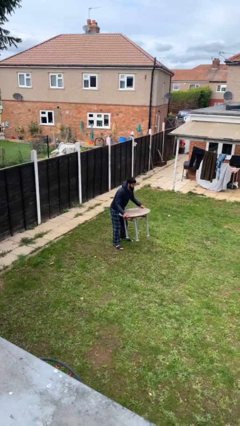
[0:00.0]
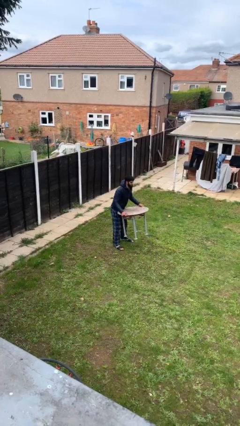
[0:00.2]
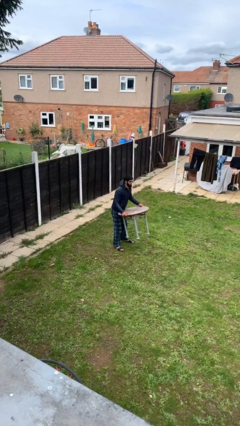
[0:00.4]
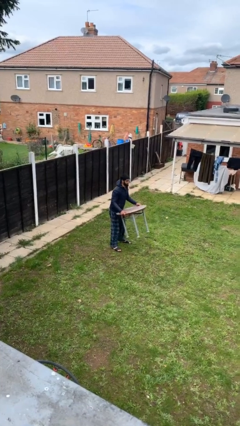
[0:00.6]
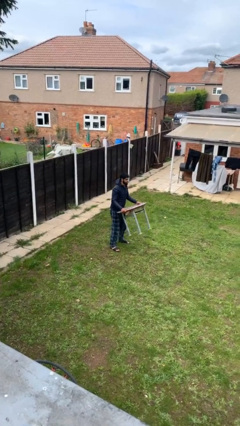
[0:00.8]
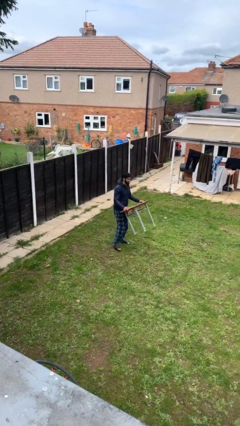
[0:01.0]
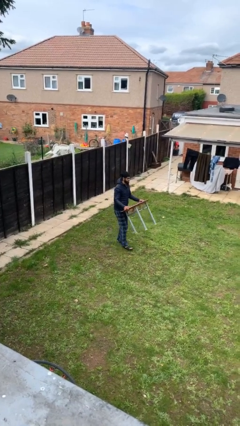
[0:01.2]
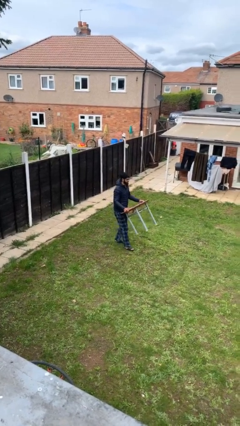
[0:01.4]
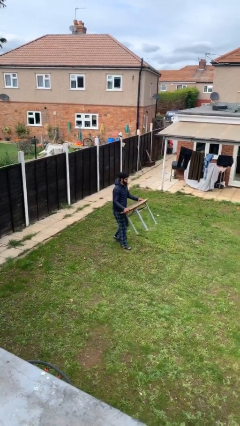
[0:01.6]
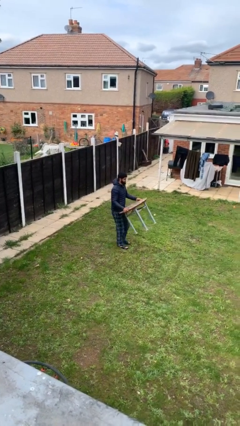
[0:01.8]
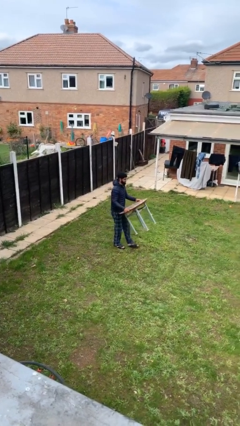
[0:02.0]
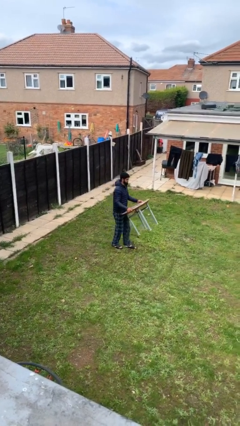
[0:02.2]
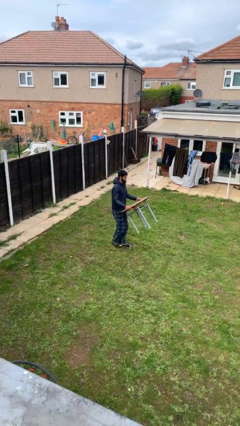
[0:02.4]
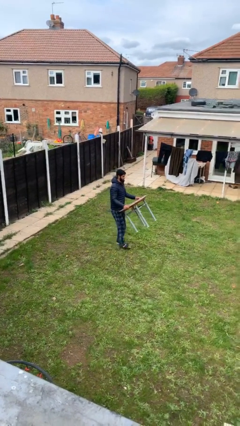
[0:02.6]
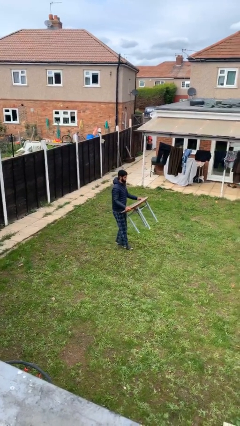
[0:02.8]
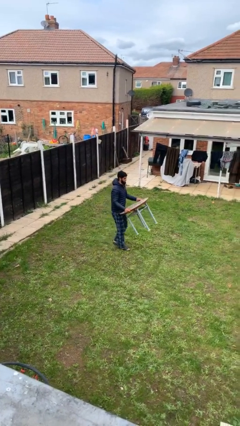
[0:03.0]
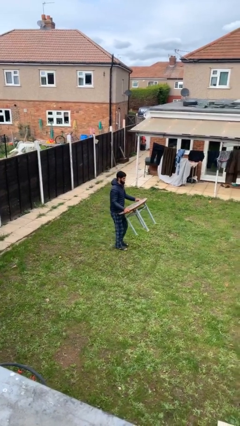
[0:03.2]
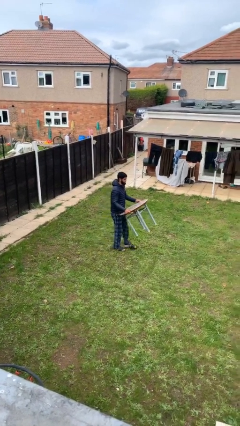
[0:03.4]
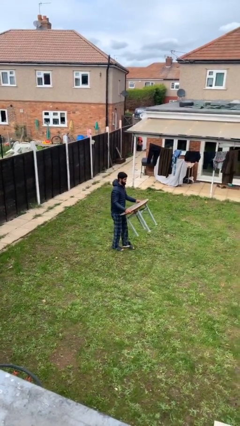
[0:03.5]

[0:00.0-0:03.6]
person carries heavy object

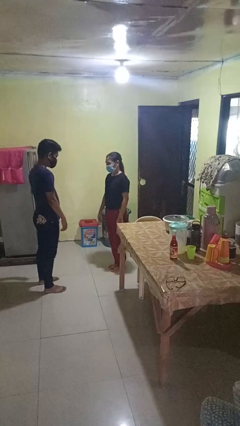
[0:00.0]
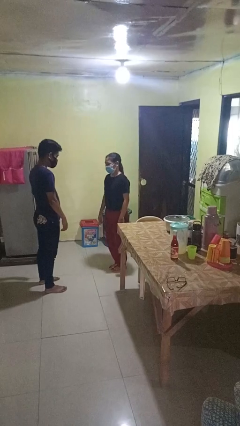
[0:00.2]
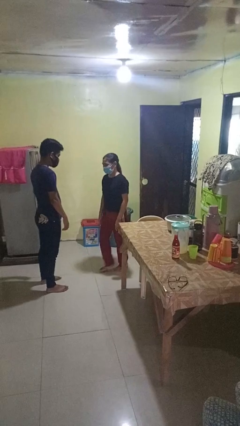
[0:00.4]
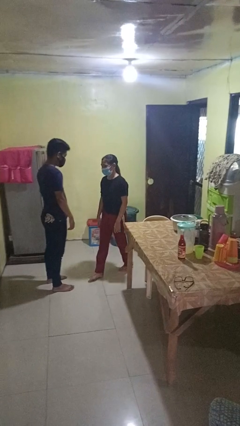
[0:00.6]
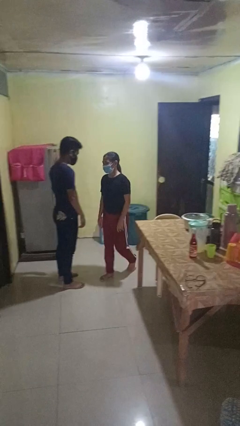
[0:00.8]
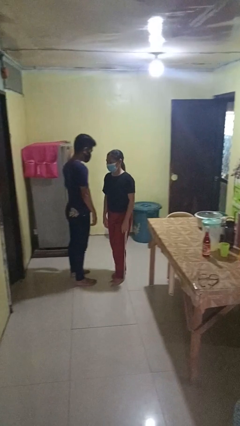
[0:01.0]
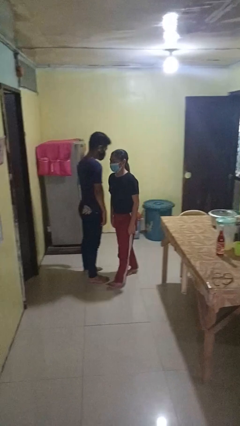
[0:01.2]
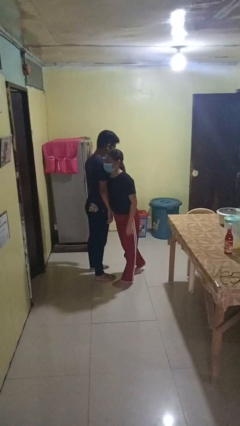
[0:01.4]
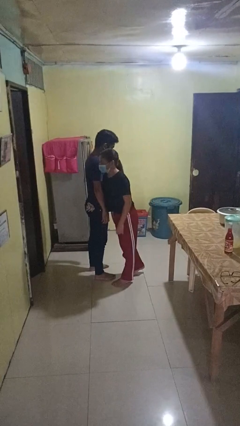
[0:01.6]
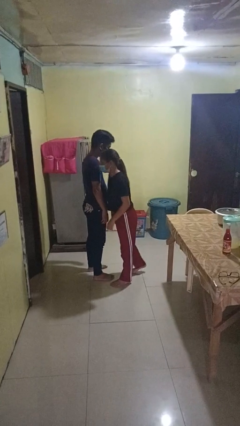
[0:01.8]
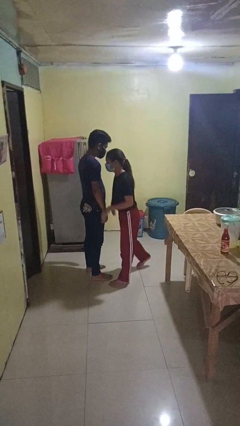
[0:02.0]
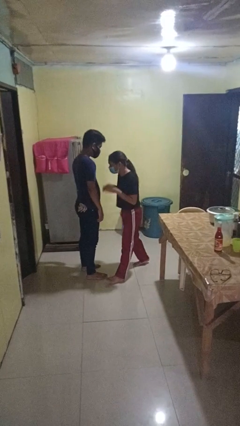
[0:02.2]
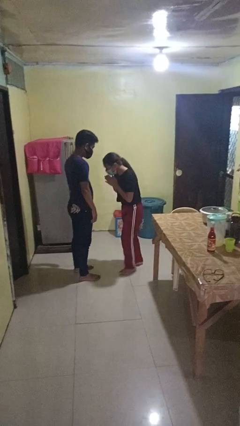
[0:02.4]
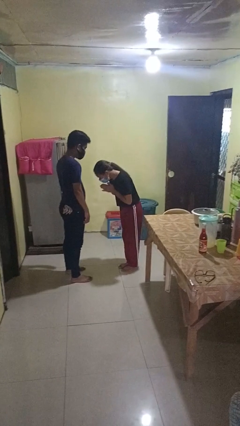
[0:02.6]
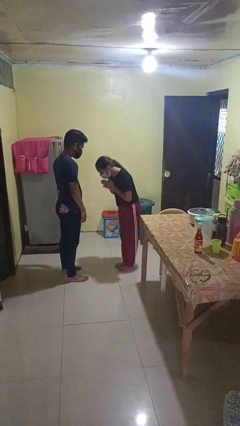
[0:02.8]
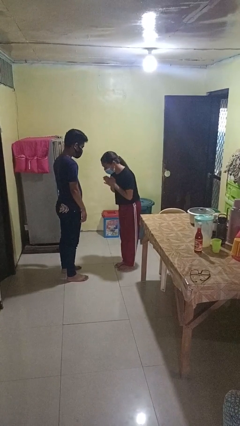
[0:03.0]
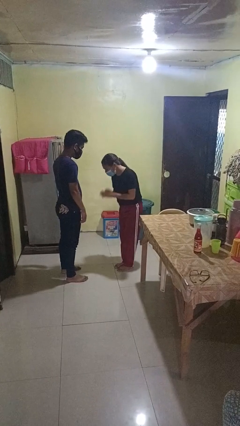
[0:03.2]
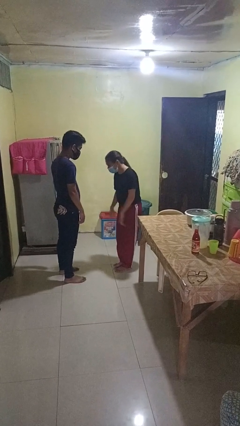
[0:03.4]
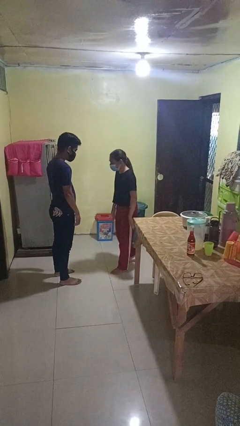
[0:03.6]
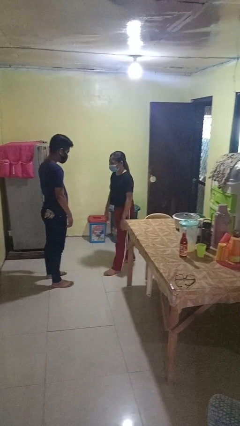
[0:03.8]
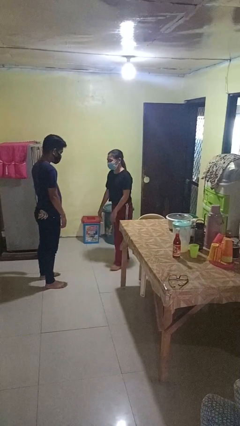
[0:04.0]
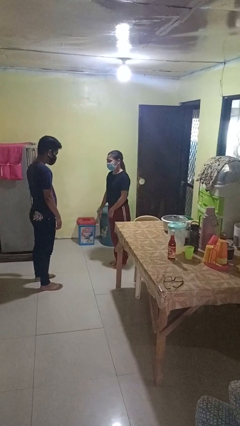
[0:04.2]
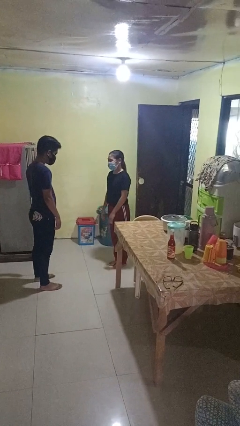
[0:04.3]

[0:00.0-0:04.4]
person bumps into person

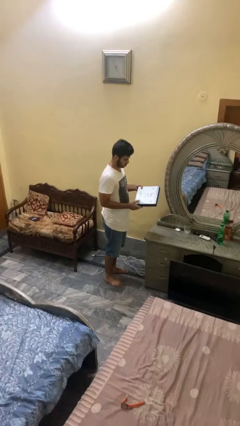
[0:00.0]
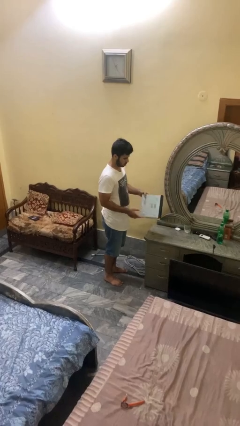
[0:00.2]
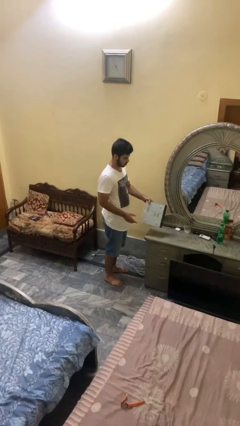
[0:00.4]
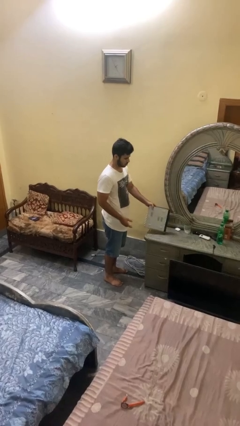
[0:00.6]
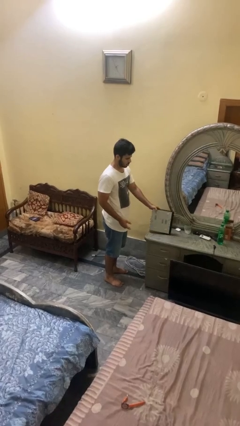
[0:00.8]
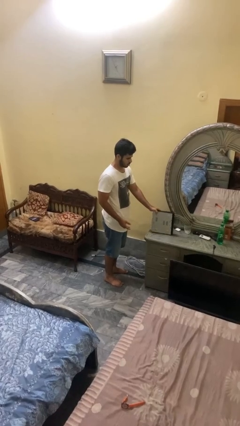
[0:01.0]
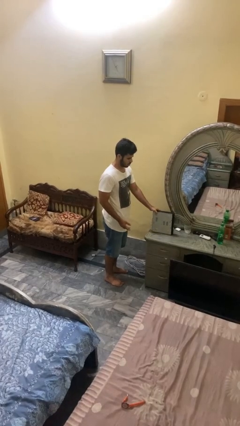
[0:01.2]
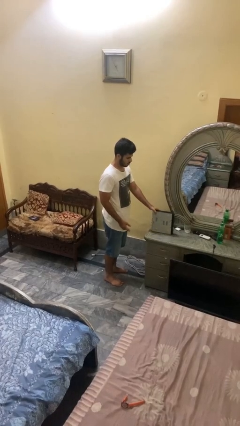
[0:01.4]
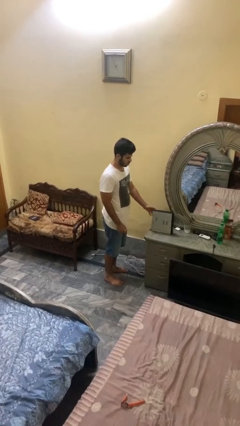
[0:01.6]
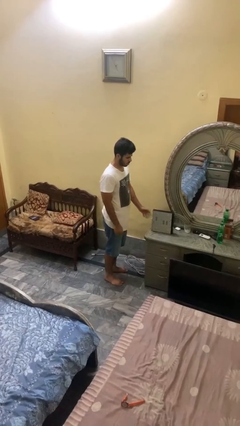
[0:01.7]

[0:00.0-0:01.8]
person puts down object on countertop

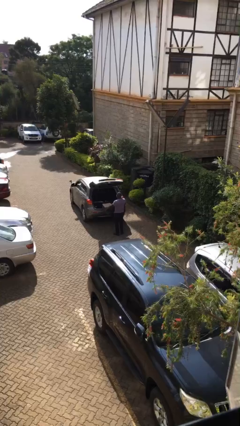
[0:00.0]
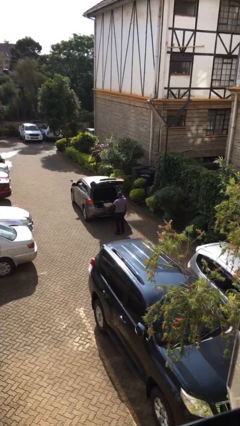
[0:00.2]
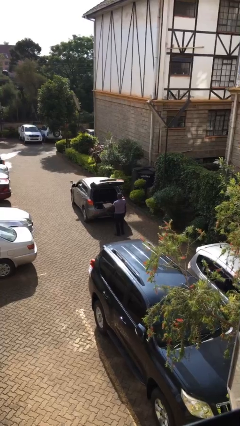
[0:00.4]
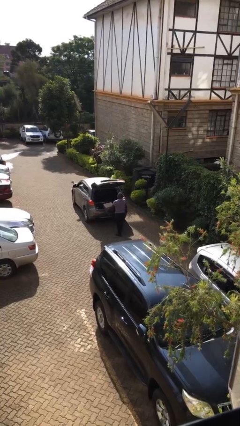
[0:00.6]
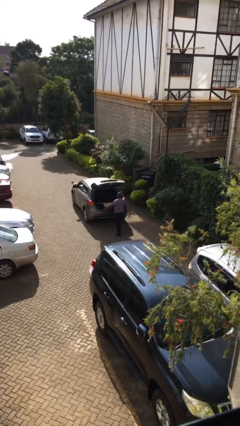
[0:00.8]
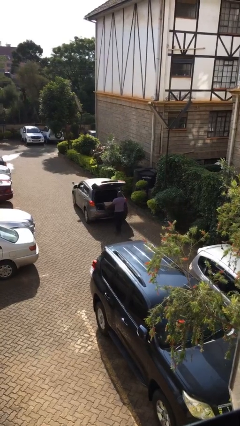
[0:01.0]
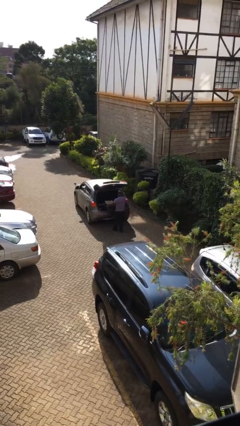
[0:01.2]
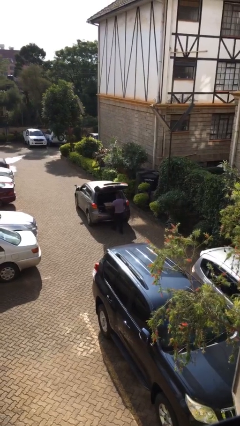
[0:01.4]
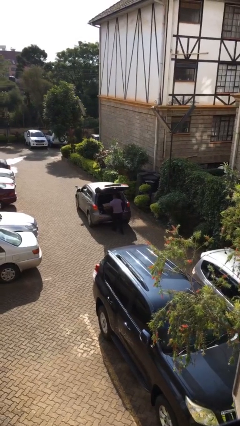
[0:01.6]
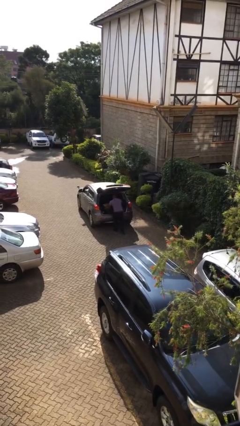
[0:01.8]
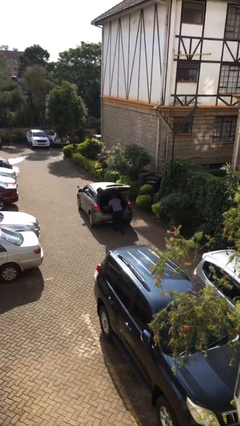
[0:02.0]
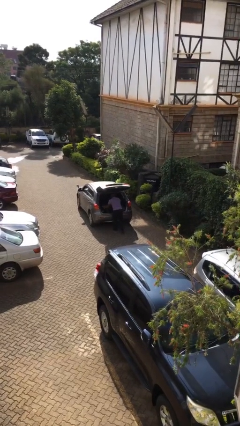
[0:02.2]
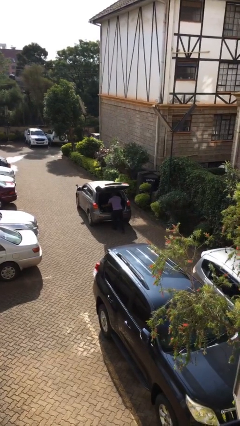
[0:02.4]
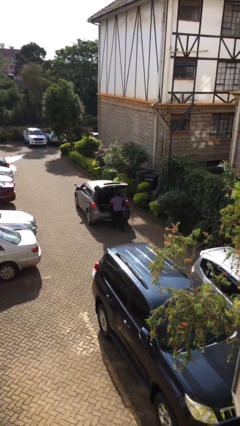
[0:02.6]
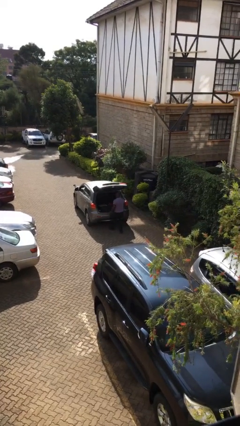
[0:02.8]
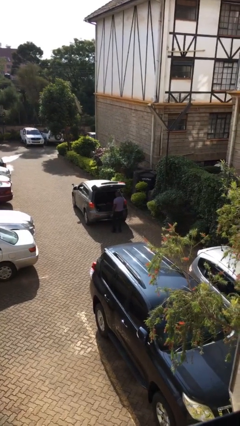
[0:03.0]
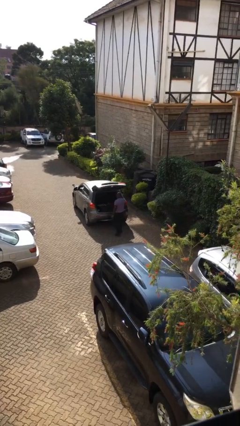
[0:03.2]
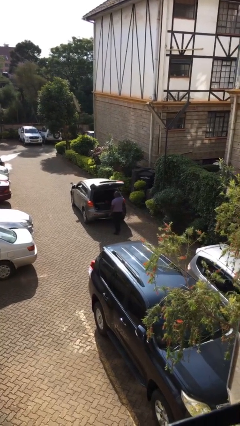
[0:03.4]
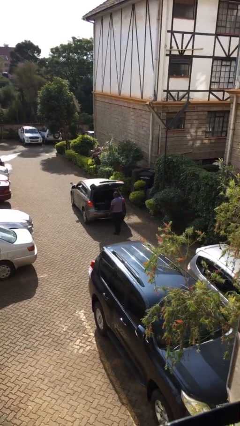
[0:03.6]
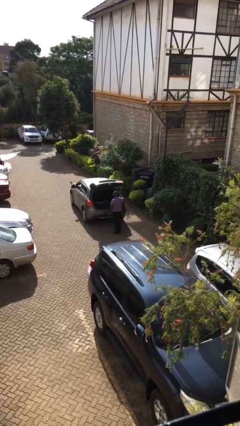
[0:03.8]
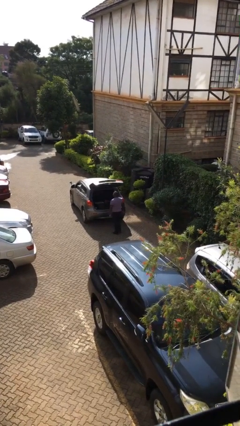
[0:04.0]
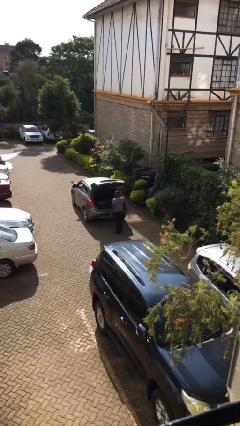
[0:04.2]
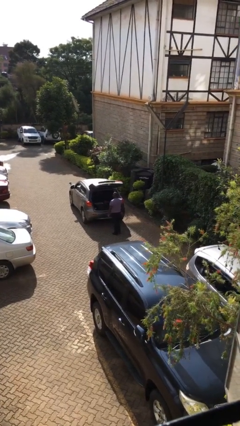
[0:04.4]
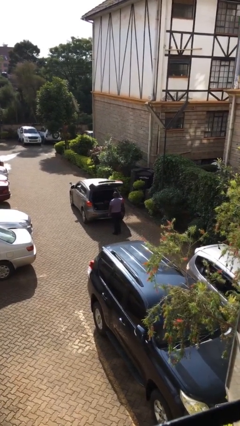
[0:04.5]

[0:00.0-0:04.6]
person loads car

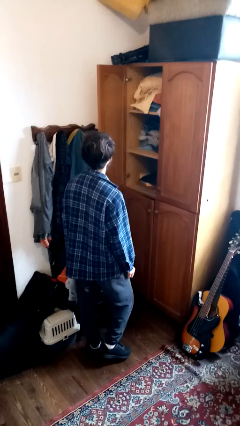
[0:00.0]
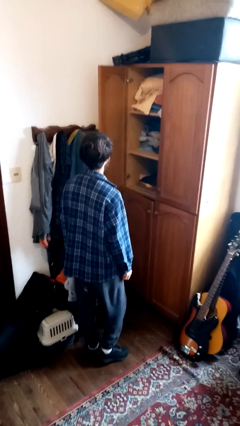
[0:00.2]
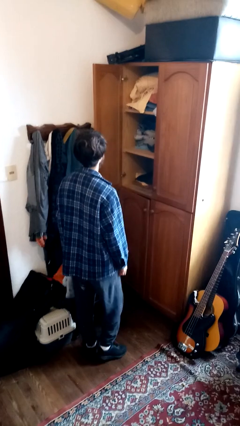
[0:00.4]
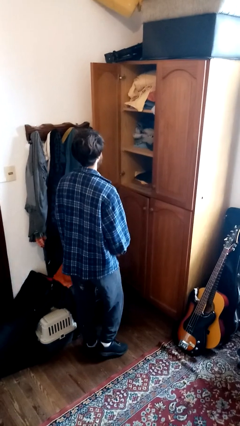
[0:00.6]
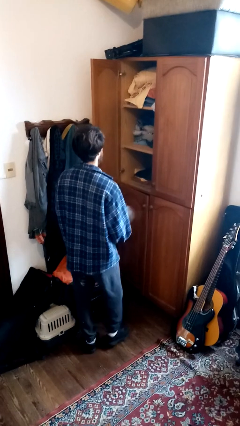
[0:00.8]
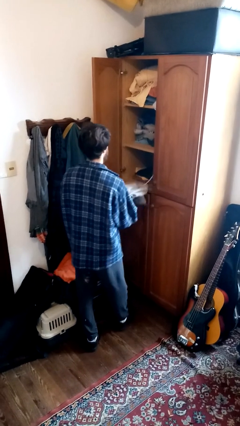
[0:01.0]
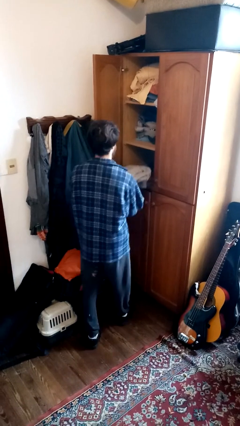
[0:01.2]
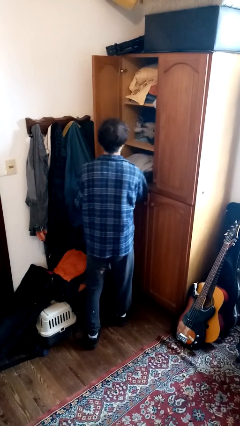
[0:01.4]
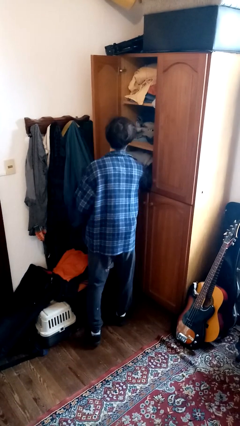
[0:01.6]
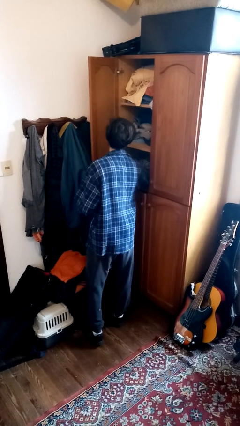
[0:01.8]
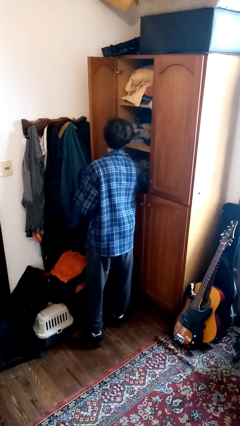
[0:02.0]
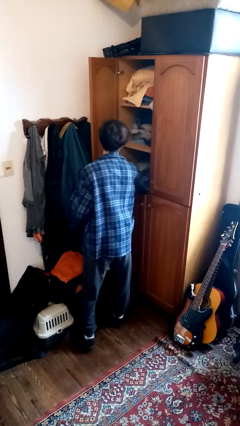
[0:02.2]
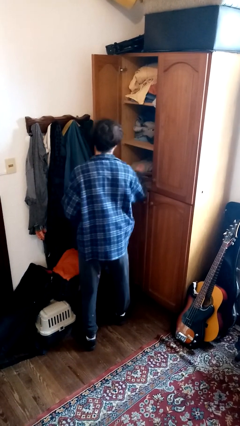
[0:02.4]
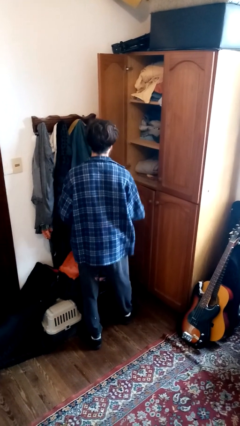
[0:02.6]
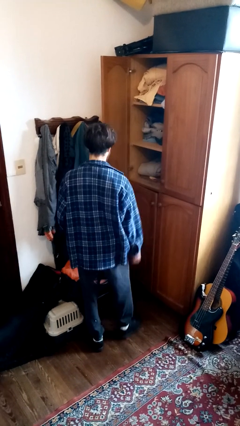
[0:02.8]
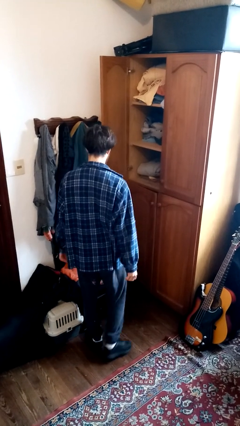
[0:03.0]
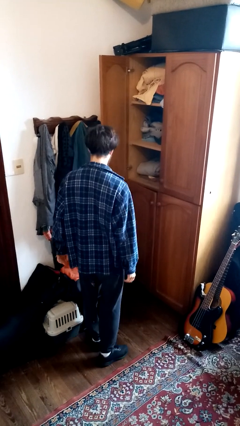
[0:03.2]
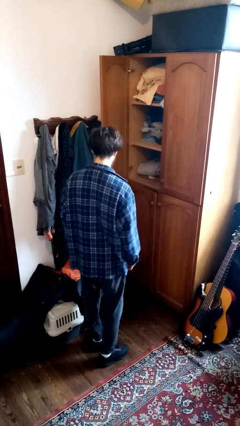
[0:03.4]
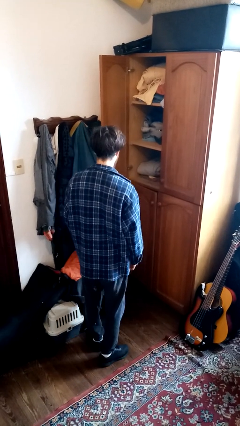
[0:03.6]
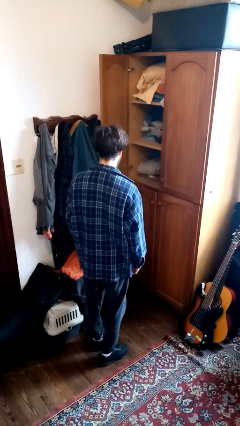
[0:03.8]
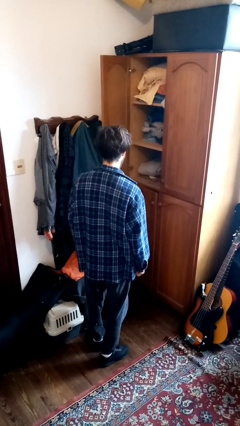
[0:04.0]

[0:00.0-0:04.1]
person puts clothes into dresser
